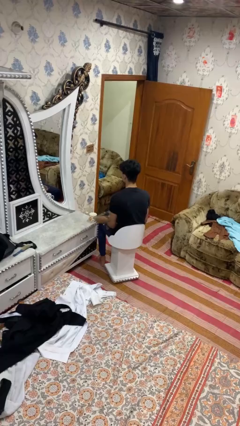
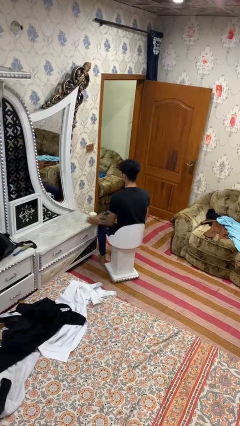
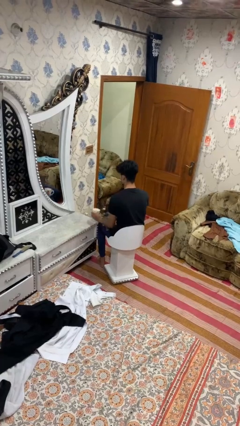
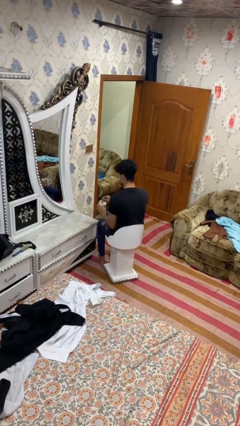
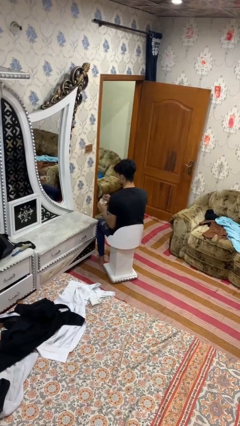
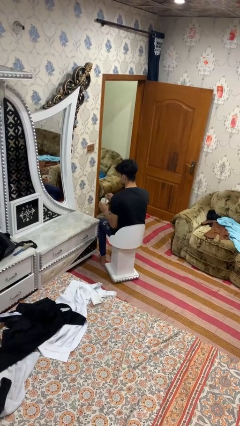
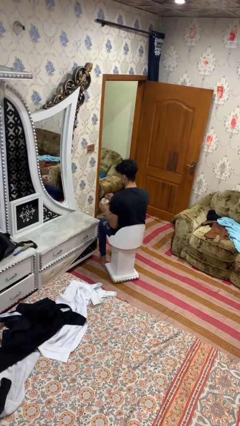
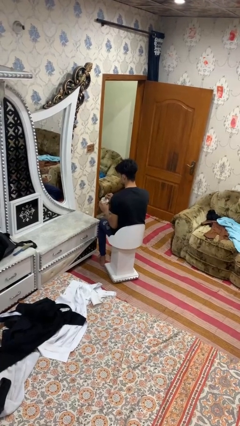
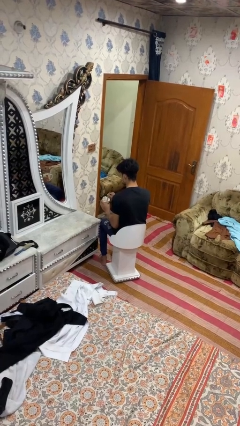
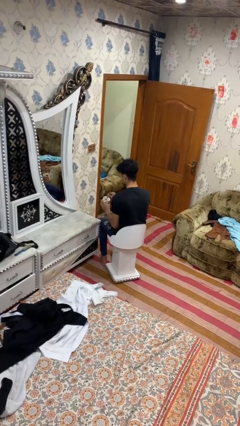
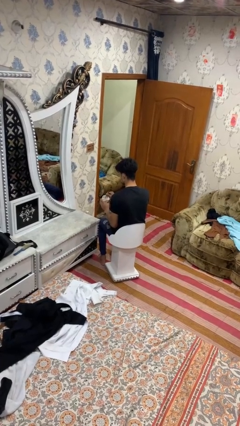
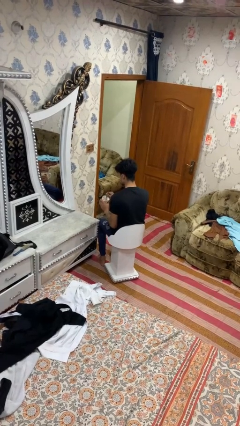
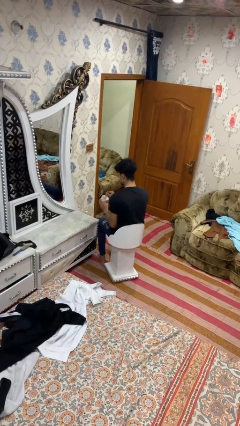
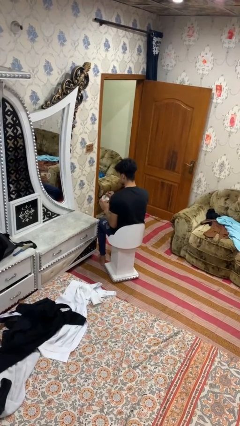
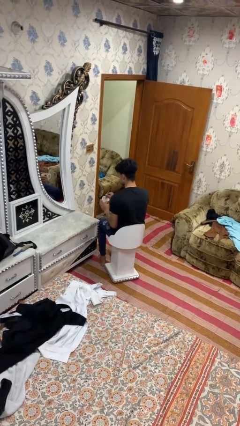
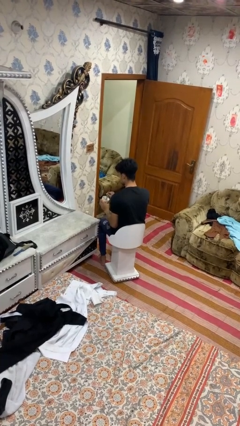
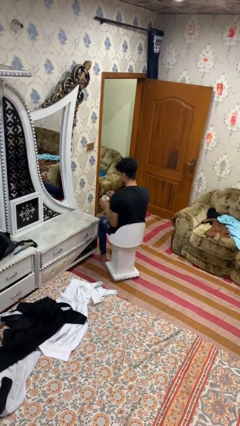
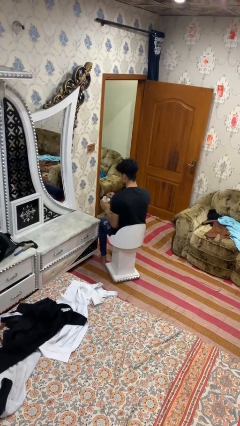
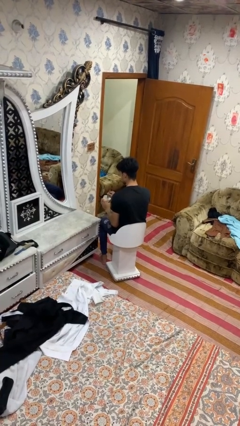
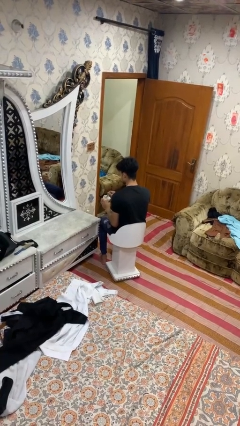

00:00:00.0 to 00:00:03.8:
person stirs mug

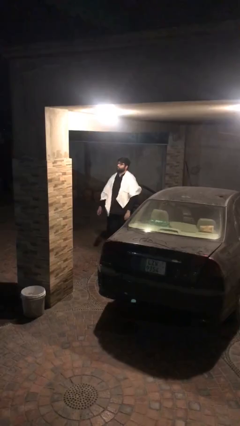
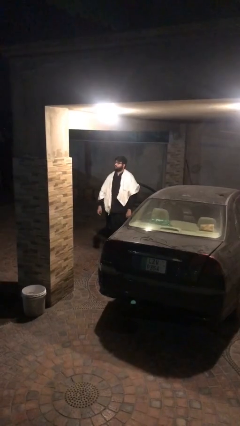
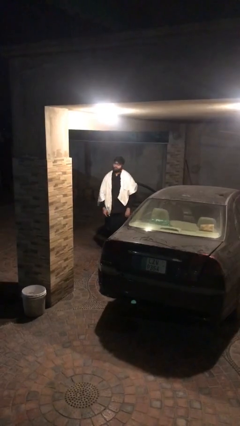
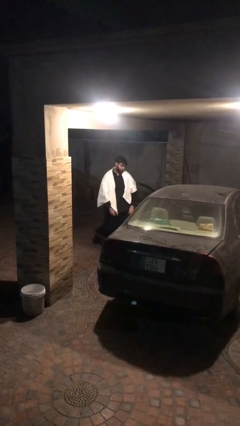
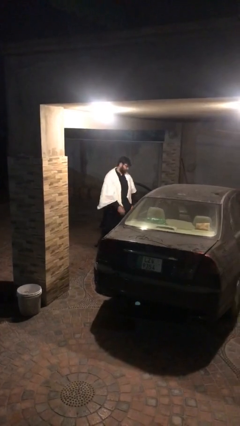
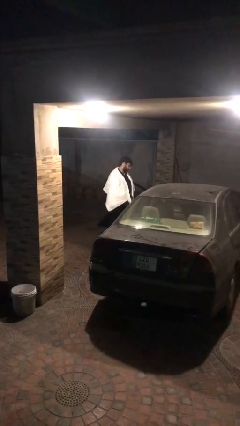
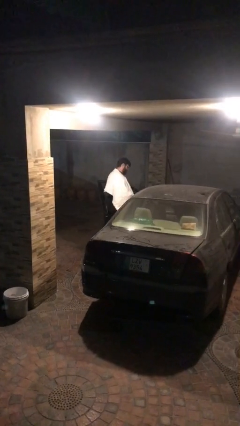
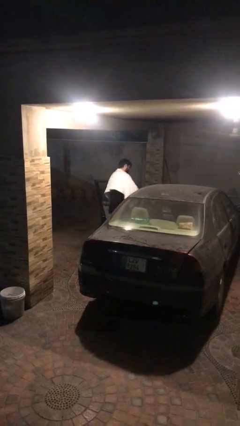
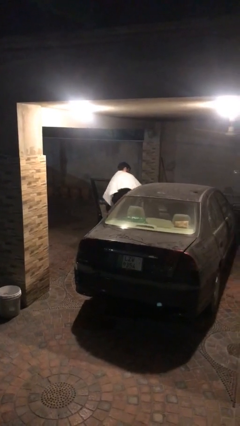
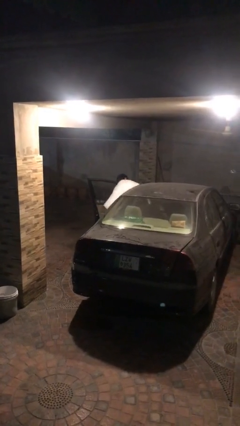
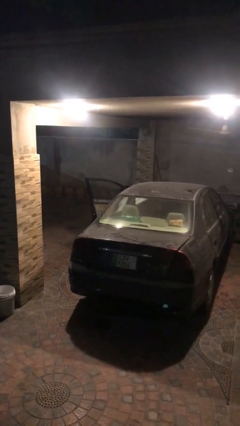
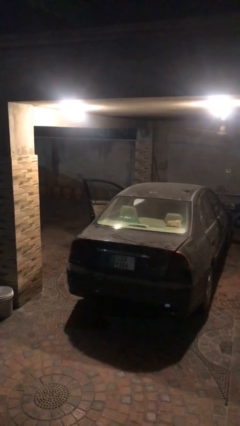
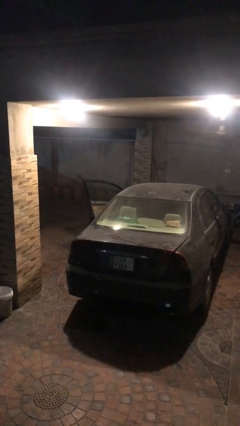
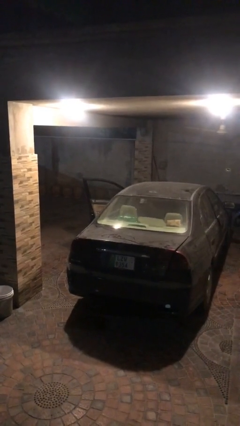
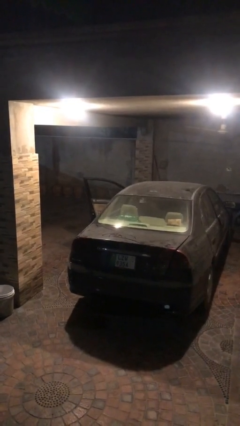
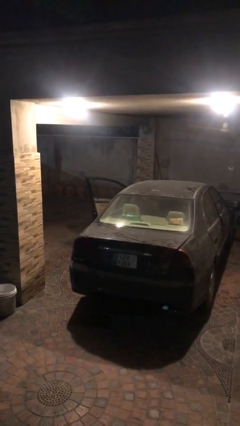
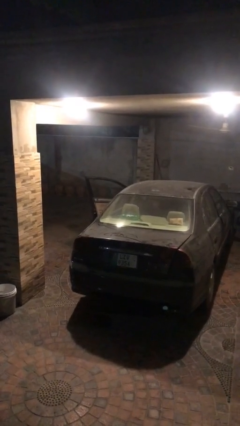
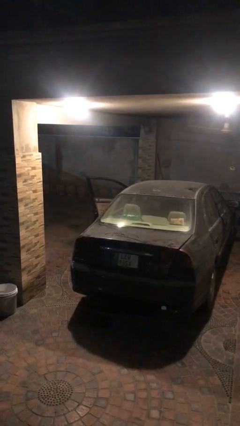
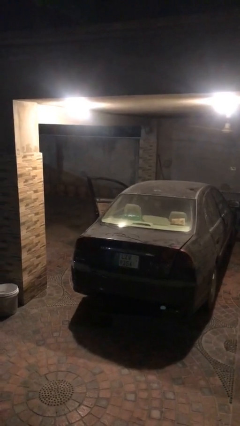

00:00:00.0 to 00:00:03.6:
person enters car

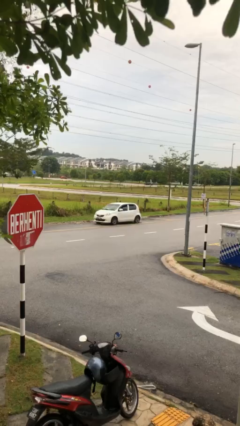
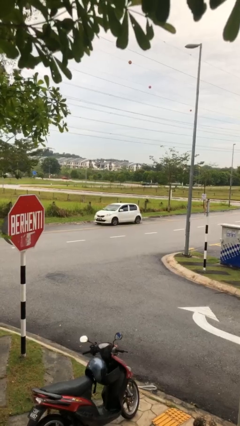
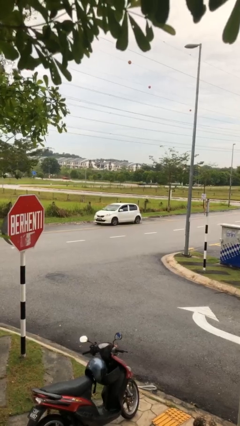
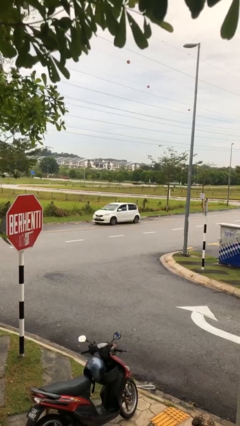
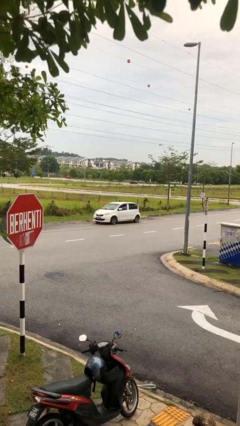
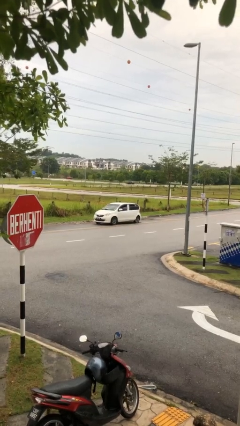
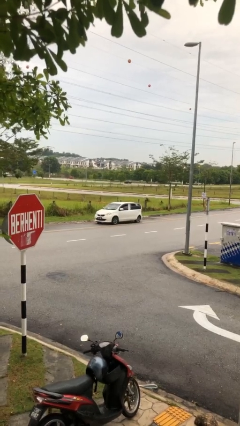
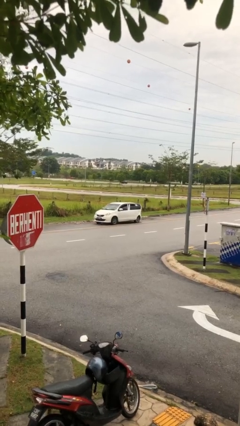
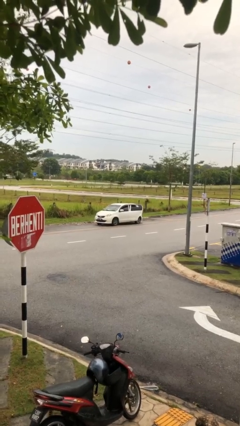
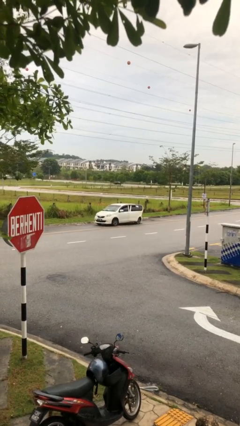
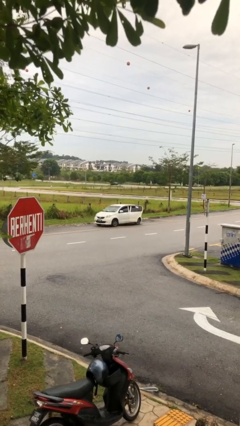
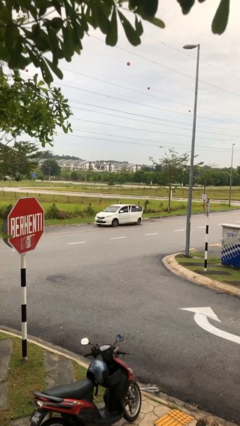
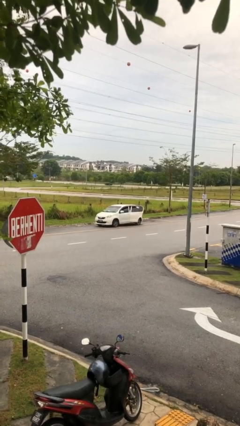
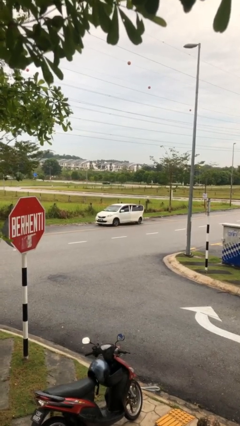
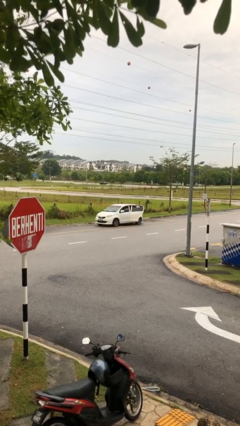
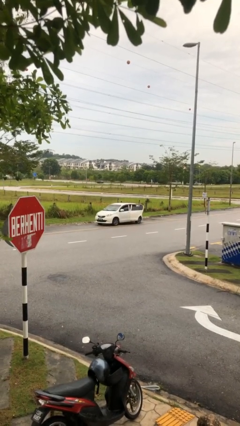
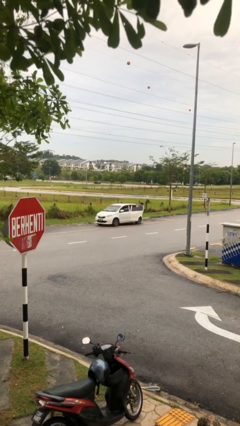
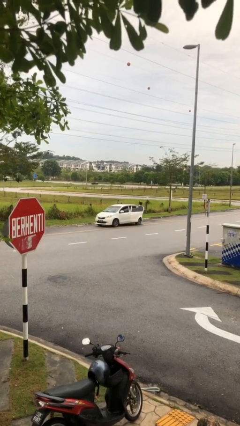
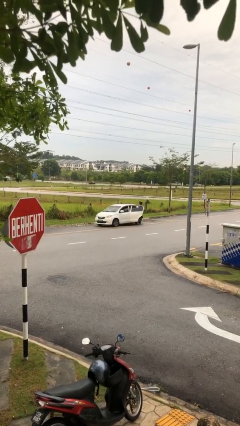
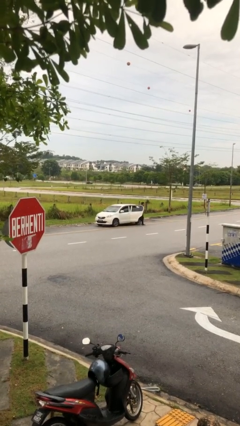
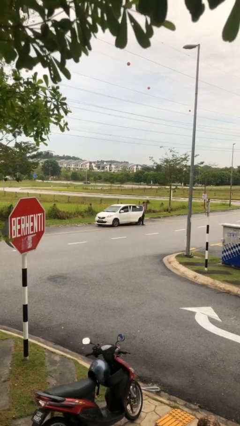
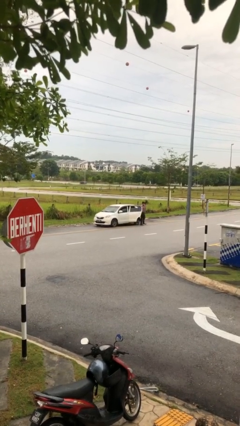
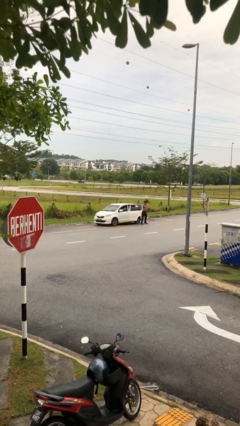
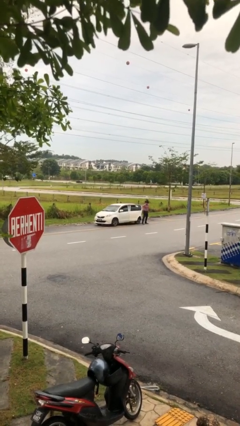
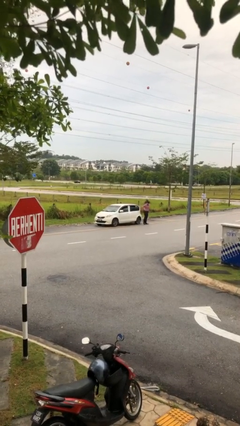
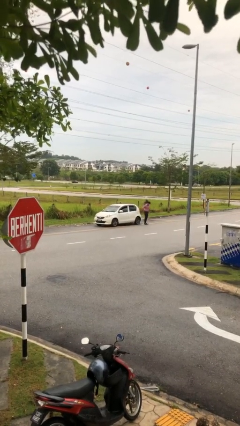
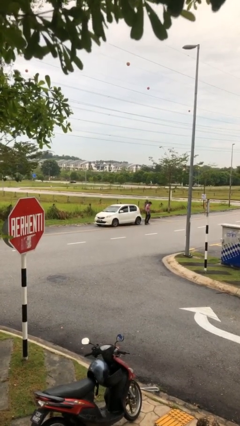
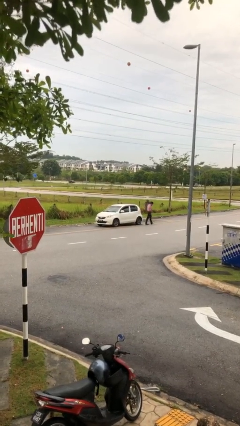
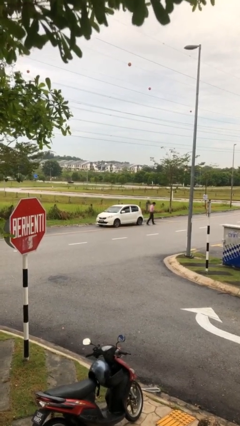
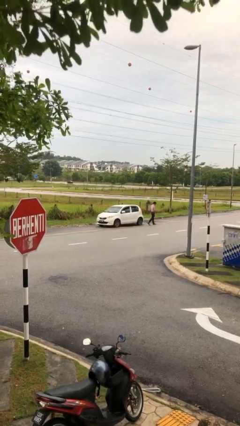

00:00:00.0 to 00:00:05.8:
car drops off person

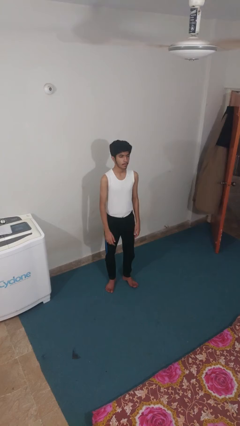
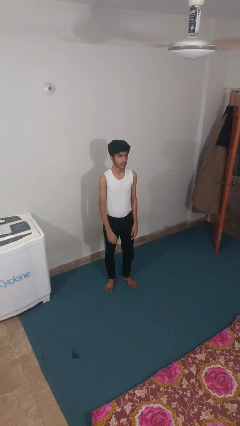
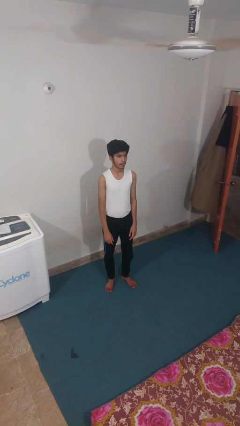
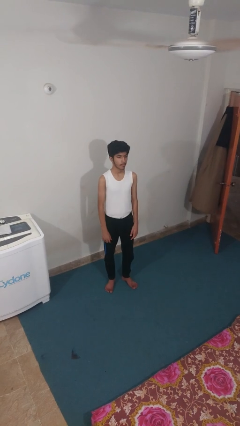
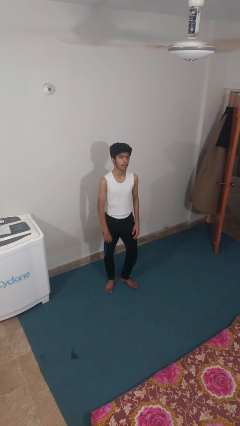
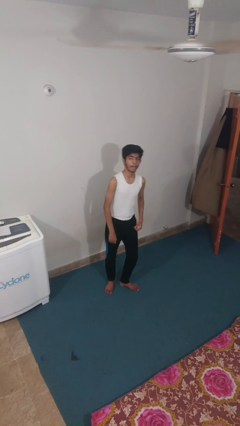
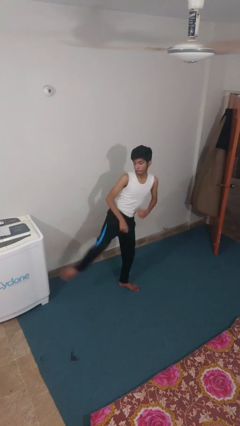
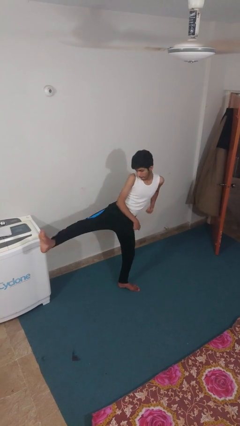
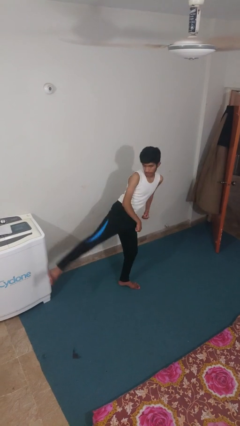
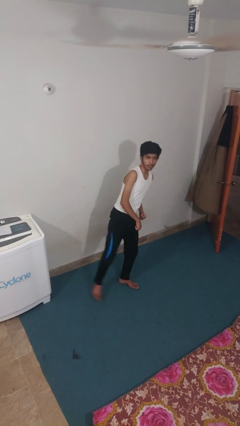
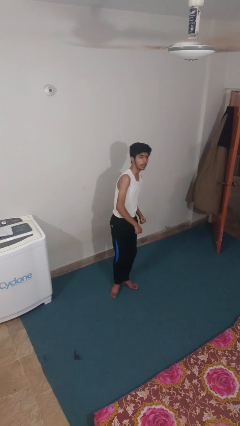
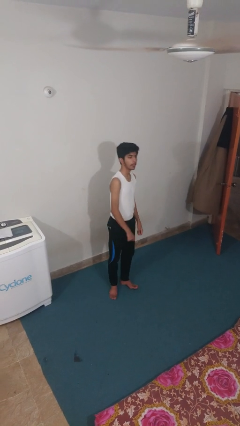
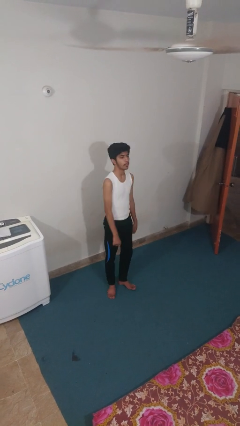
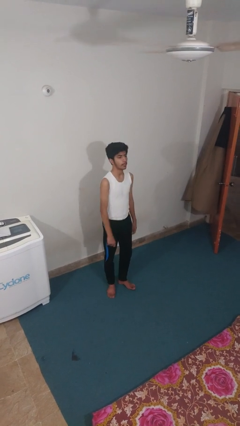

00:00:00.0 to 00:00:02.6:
person karate kicks

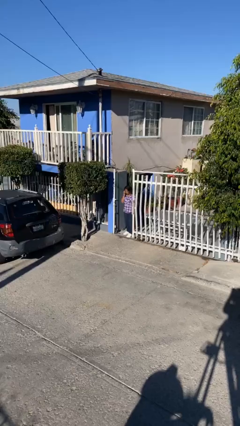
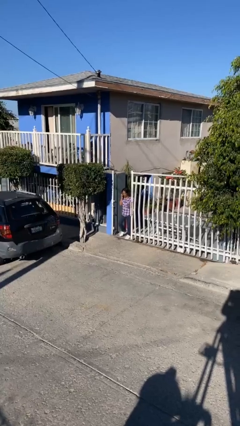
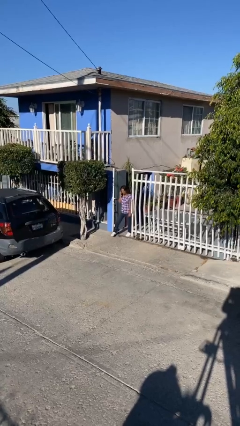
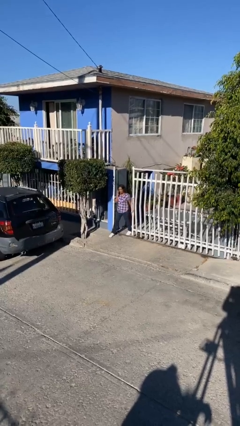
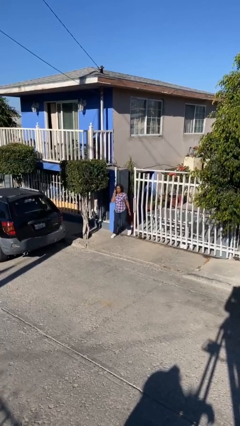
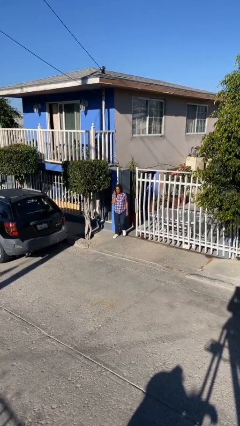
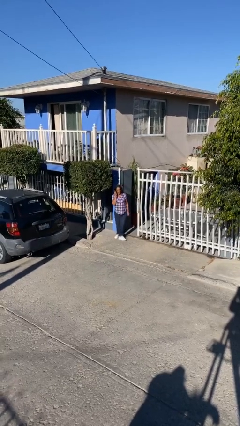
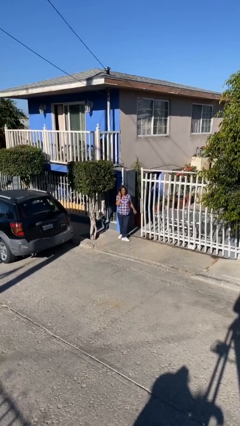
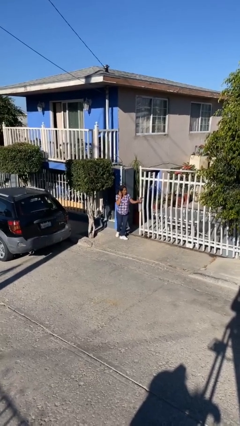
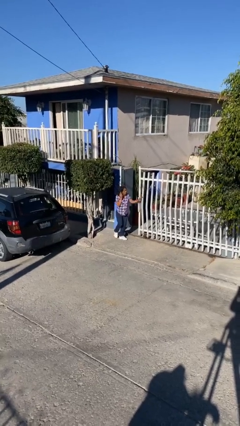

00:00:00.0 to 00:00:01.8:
person enters scene through structure
